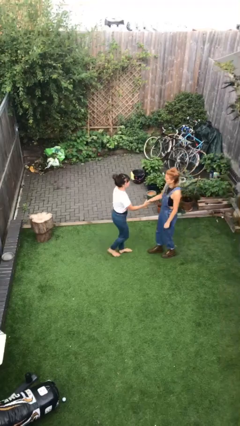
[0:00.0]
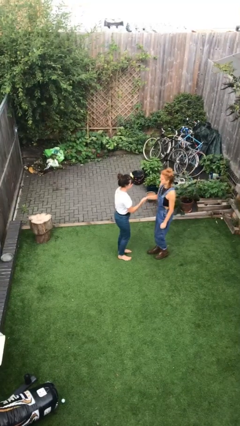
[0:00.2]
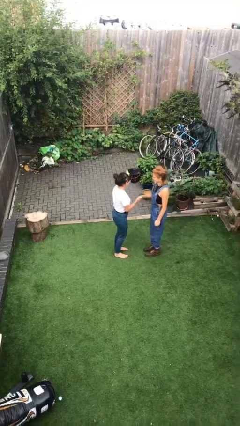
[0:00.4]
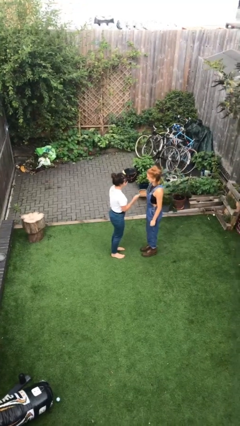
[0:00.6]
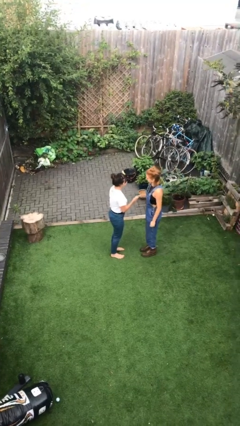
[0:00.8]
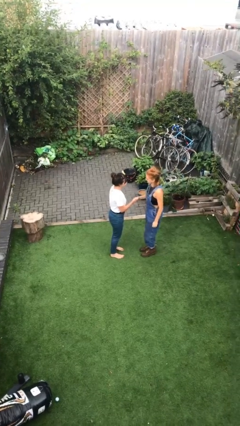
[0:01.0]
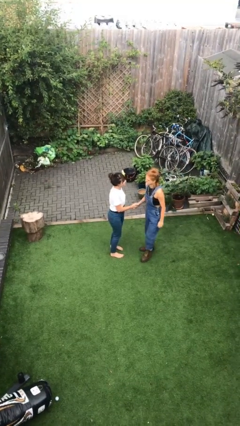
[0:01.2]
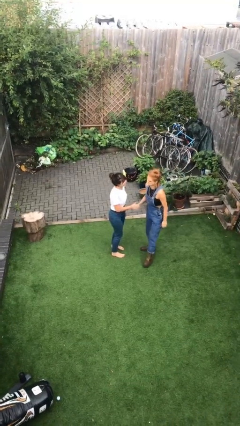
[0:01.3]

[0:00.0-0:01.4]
person shakes hand

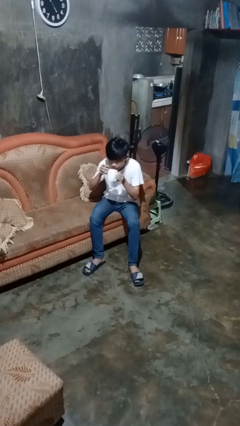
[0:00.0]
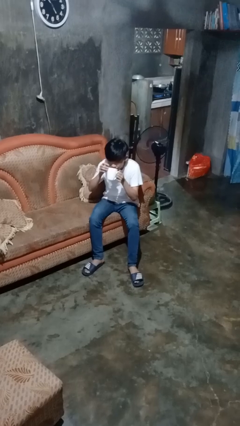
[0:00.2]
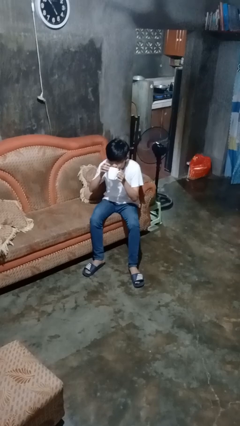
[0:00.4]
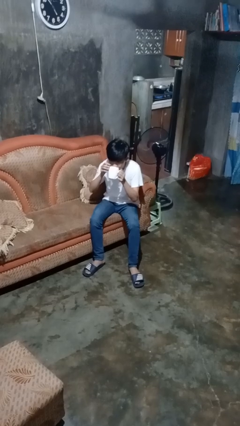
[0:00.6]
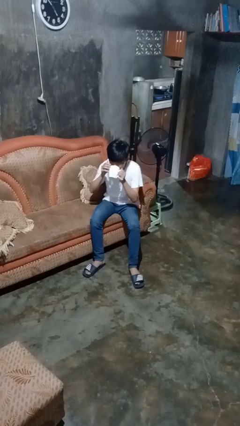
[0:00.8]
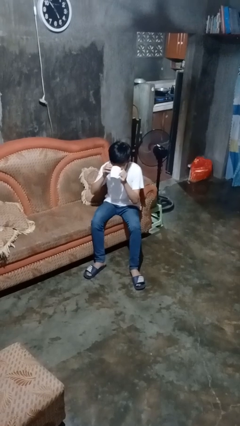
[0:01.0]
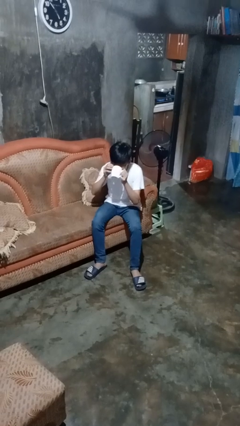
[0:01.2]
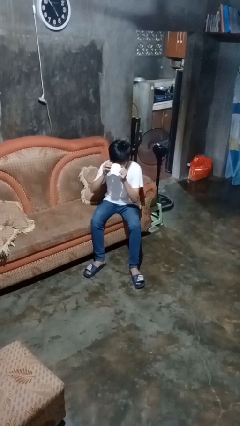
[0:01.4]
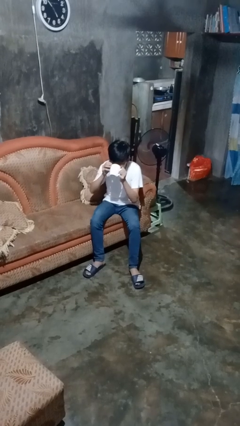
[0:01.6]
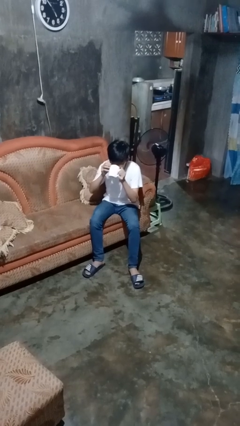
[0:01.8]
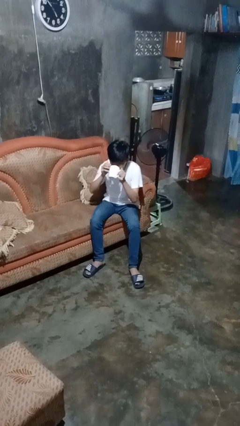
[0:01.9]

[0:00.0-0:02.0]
person drinks from mug

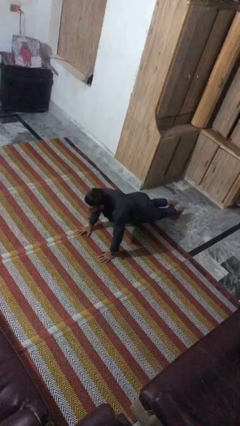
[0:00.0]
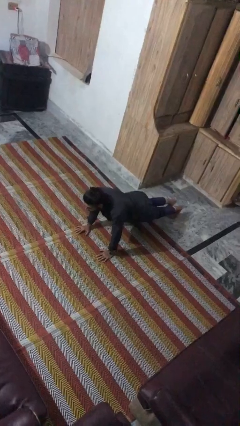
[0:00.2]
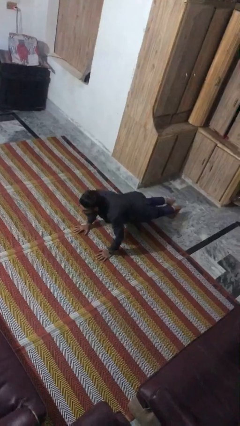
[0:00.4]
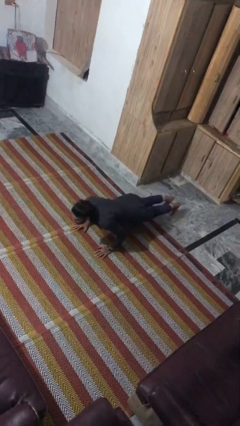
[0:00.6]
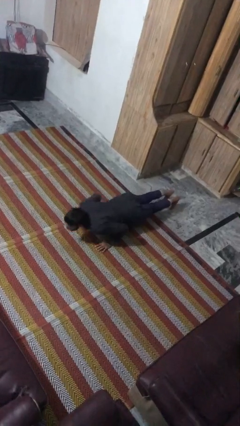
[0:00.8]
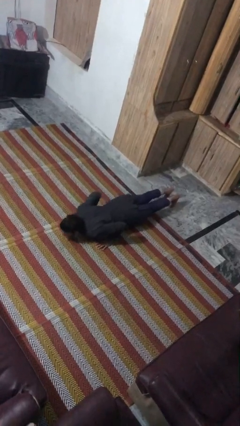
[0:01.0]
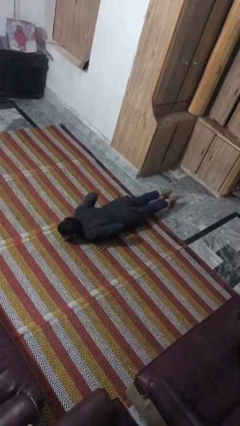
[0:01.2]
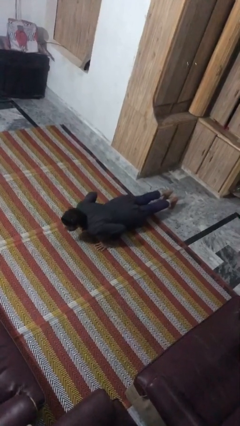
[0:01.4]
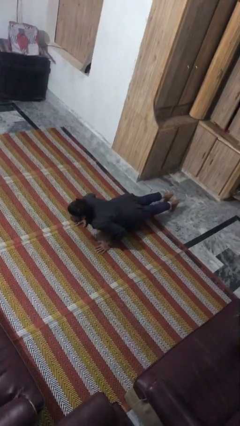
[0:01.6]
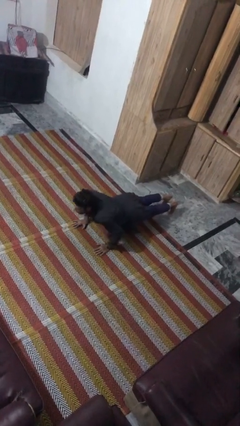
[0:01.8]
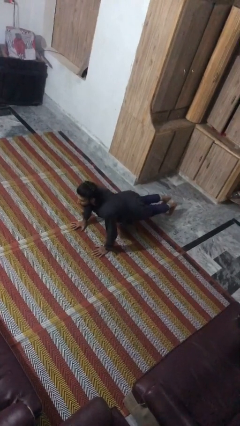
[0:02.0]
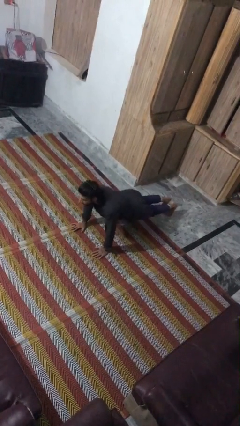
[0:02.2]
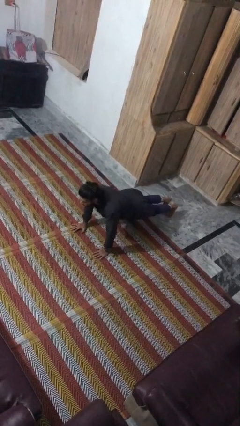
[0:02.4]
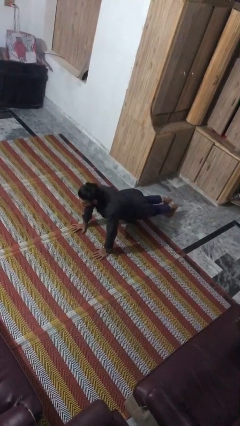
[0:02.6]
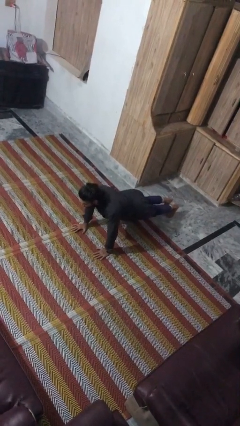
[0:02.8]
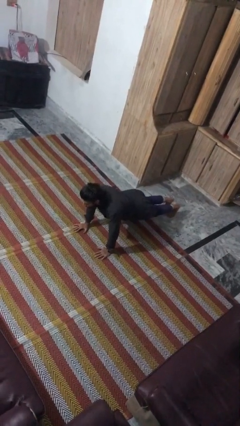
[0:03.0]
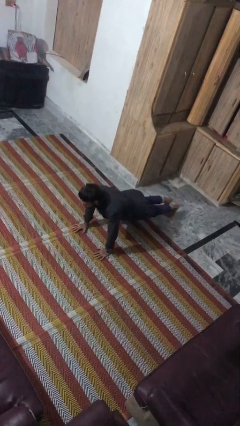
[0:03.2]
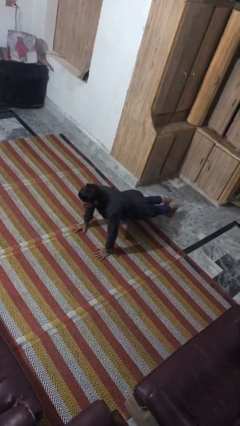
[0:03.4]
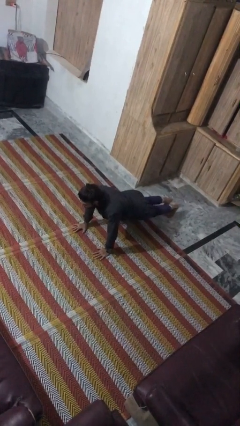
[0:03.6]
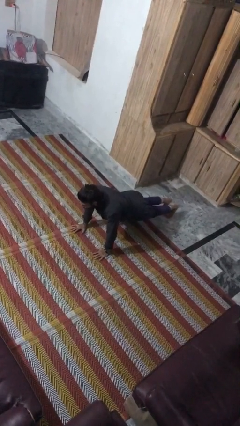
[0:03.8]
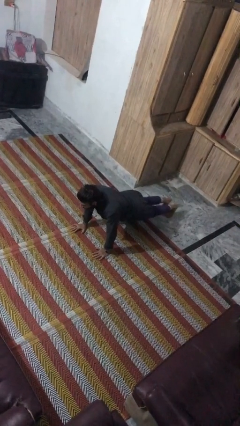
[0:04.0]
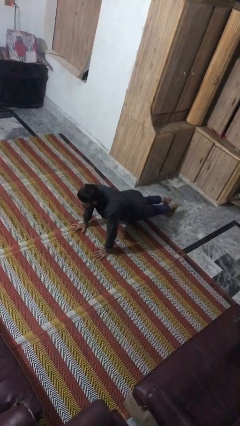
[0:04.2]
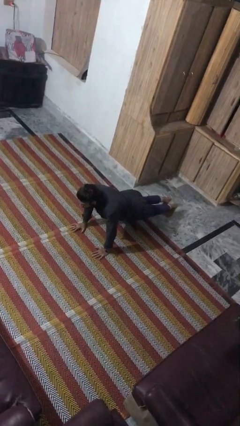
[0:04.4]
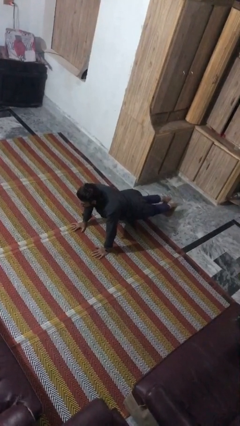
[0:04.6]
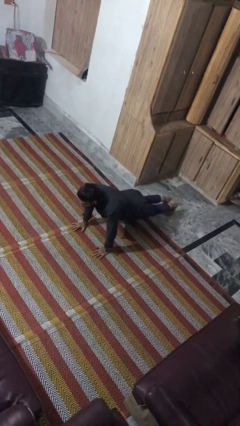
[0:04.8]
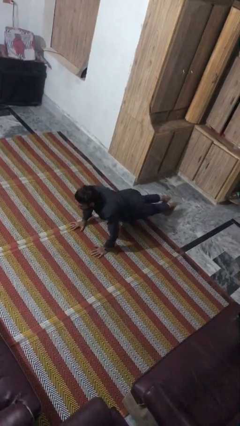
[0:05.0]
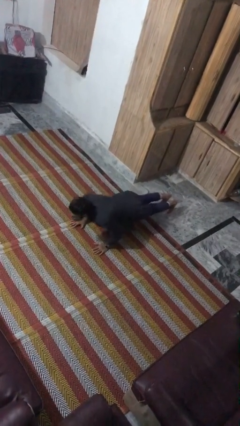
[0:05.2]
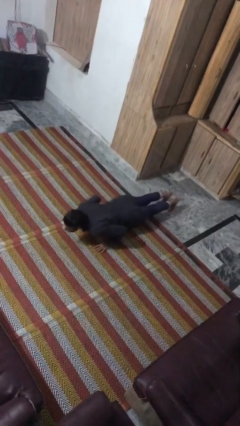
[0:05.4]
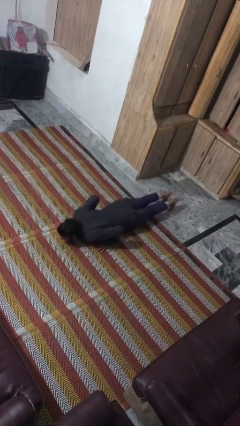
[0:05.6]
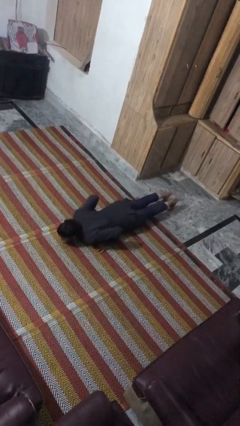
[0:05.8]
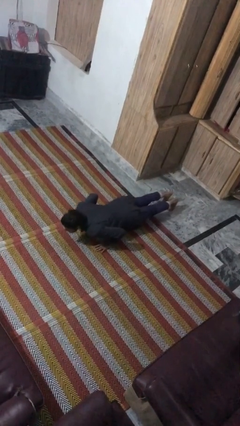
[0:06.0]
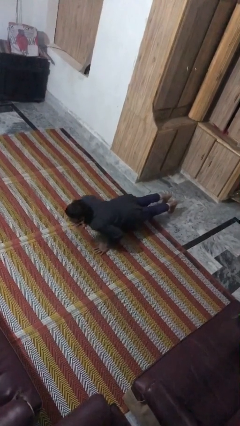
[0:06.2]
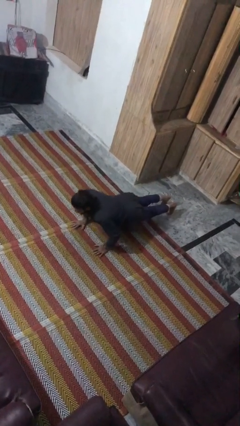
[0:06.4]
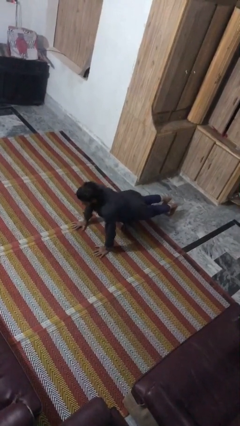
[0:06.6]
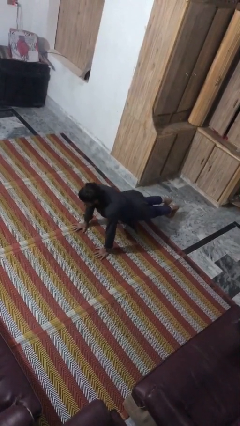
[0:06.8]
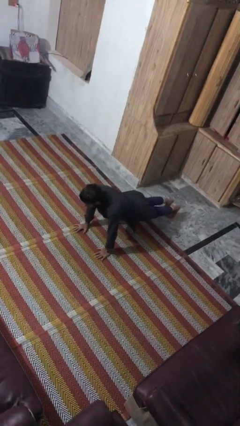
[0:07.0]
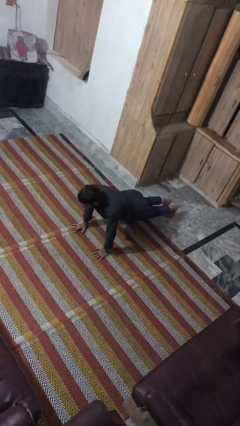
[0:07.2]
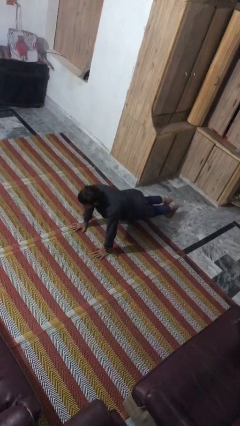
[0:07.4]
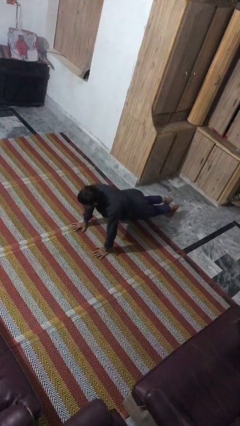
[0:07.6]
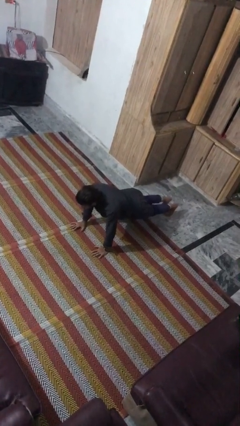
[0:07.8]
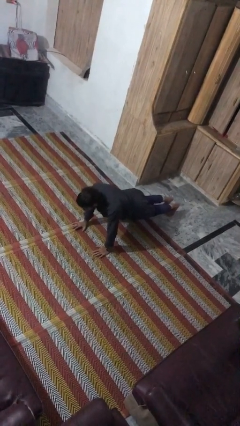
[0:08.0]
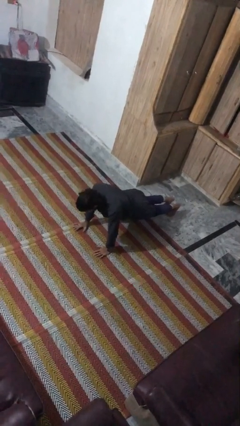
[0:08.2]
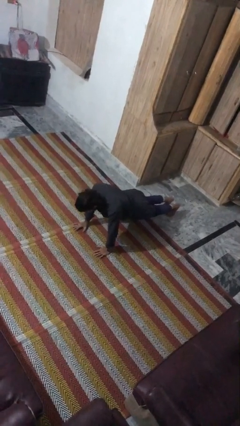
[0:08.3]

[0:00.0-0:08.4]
person exercises with pushup

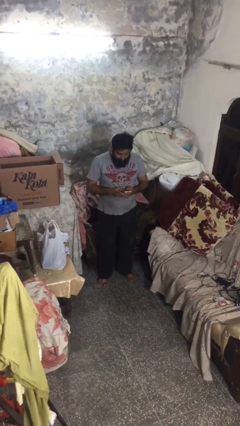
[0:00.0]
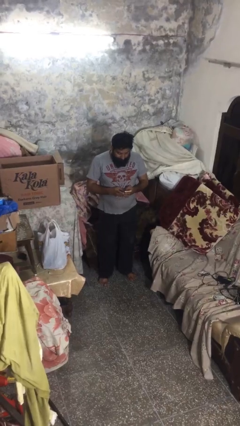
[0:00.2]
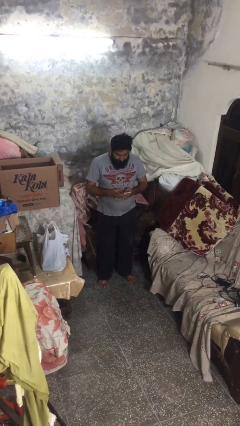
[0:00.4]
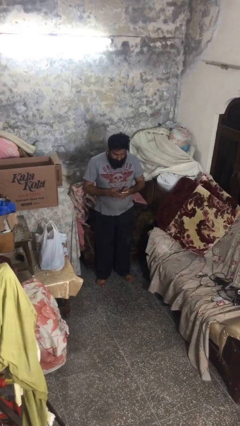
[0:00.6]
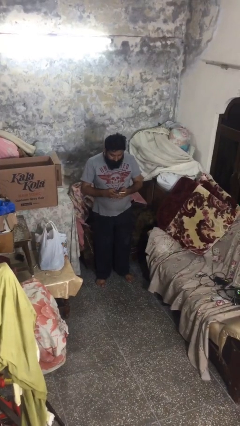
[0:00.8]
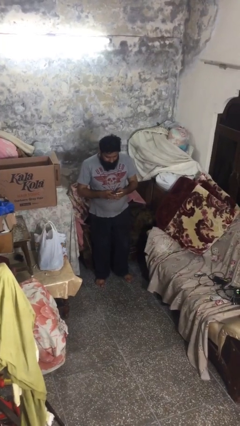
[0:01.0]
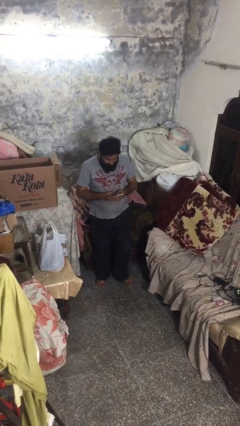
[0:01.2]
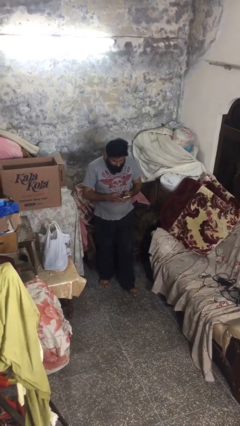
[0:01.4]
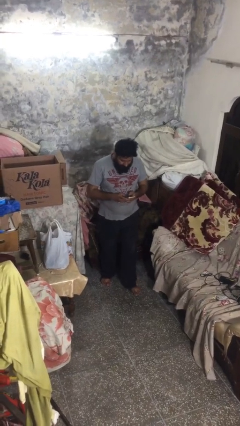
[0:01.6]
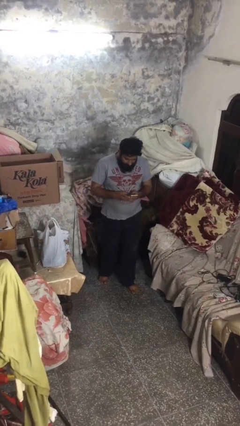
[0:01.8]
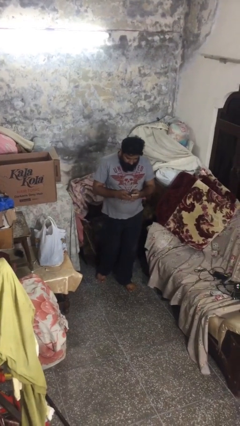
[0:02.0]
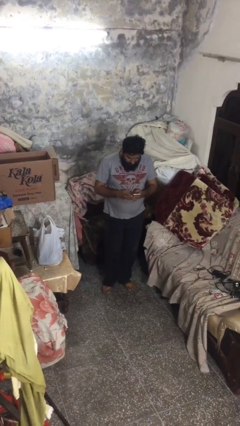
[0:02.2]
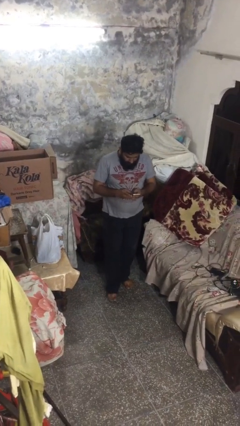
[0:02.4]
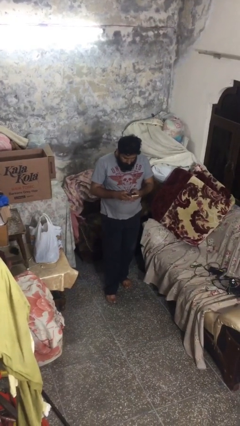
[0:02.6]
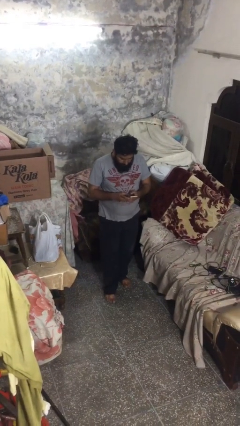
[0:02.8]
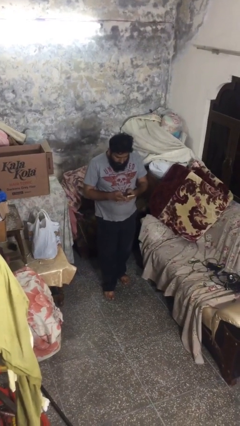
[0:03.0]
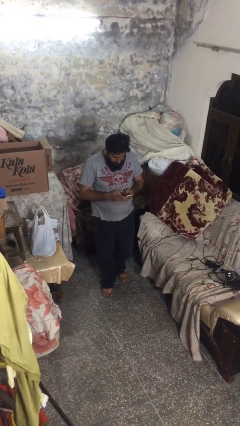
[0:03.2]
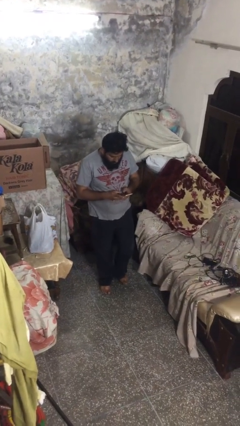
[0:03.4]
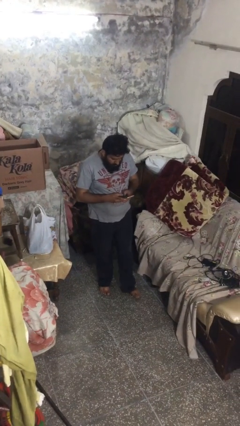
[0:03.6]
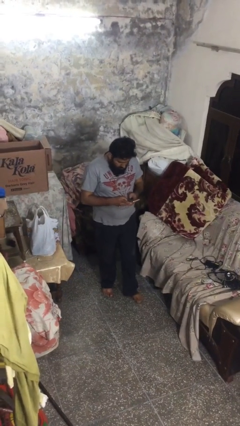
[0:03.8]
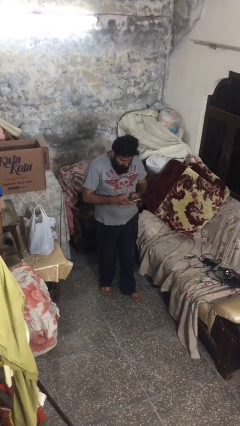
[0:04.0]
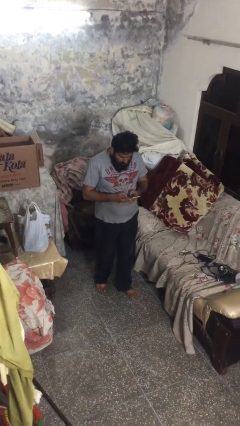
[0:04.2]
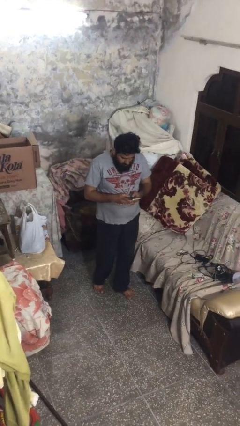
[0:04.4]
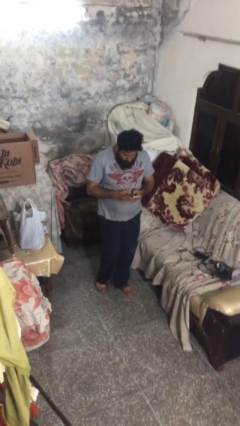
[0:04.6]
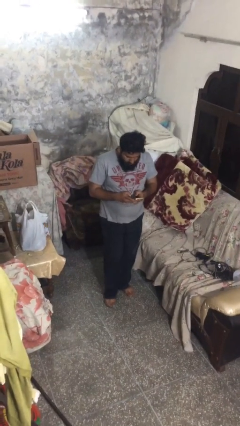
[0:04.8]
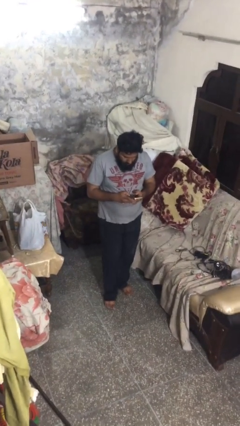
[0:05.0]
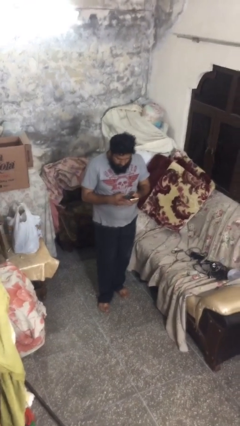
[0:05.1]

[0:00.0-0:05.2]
person texts on phone

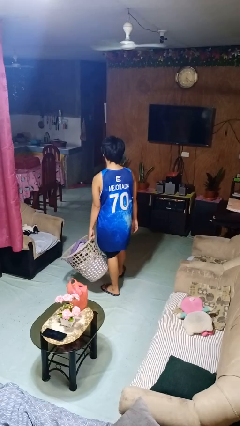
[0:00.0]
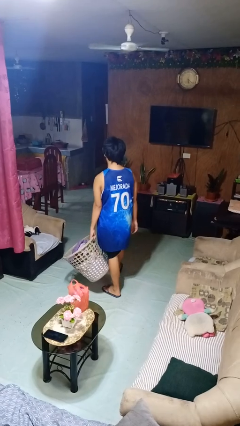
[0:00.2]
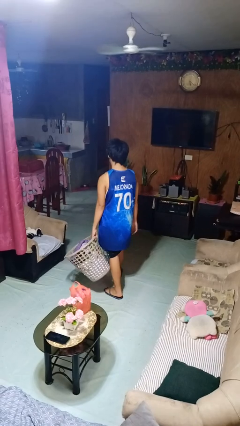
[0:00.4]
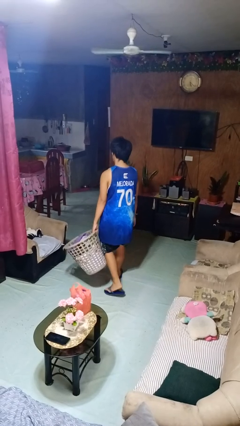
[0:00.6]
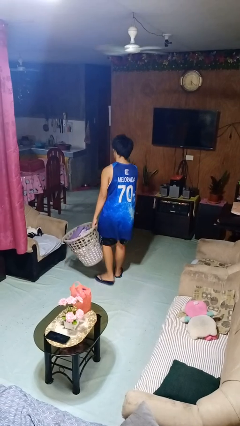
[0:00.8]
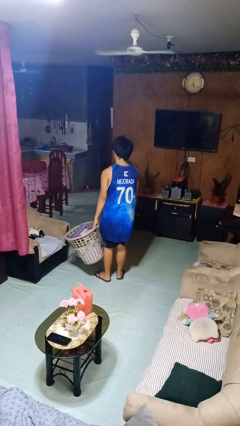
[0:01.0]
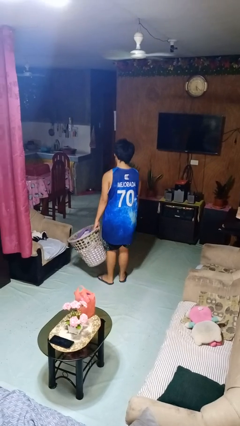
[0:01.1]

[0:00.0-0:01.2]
person carries laundry basket
